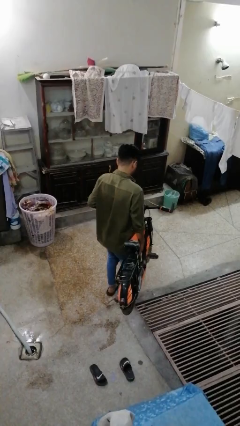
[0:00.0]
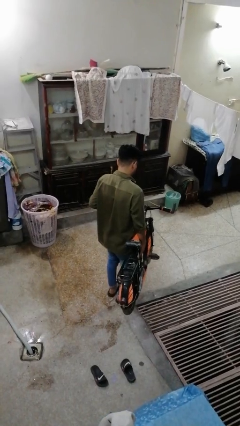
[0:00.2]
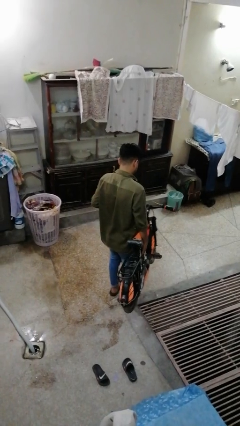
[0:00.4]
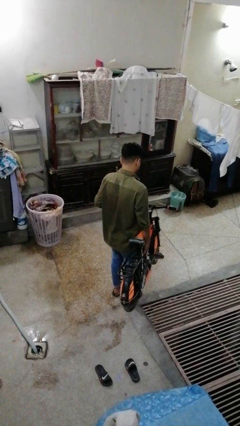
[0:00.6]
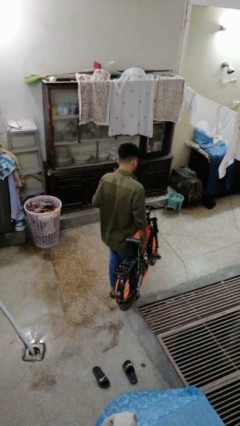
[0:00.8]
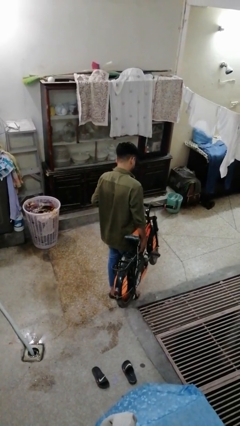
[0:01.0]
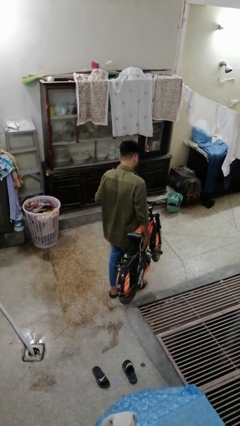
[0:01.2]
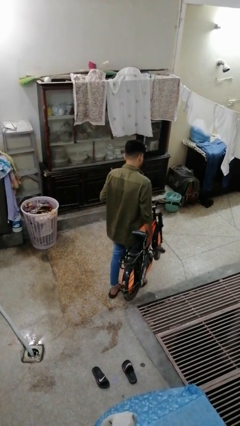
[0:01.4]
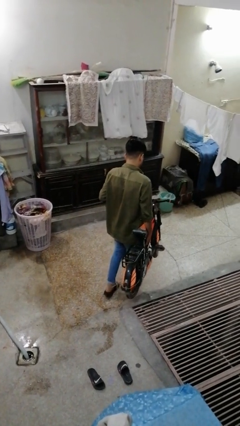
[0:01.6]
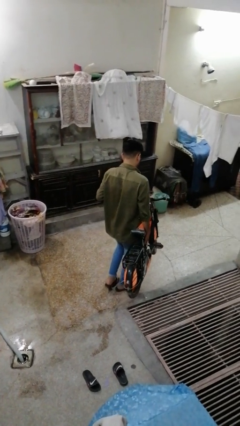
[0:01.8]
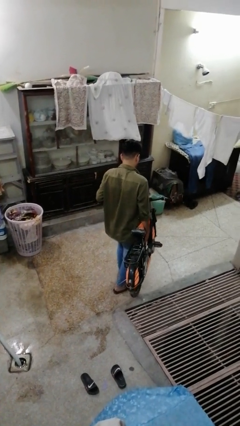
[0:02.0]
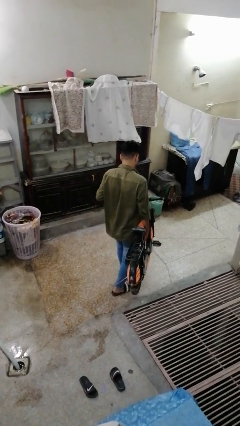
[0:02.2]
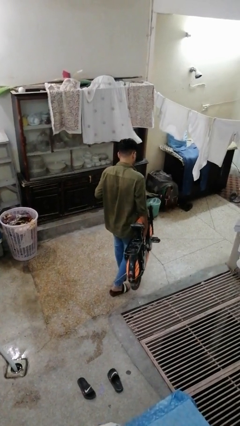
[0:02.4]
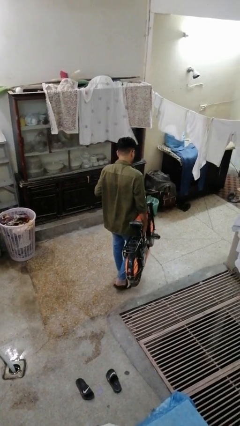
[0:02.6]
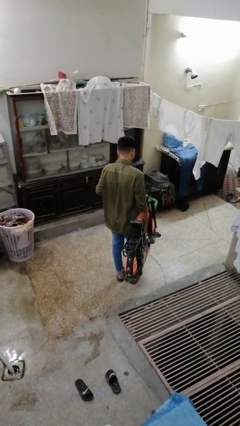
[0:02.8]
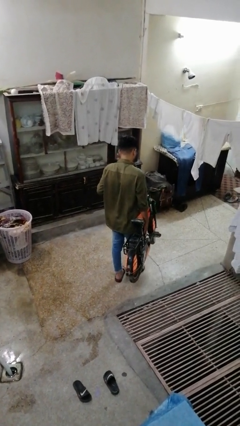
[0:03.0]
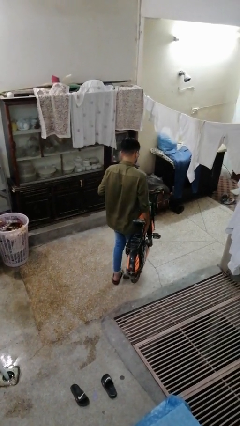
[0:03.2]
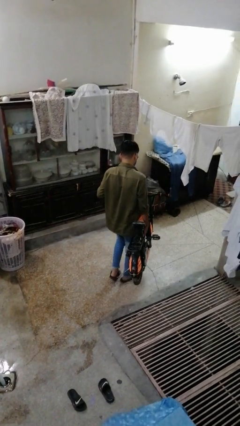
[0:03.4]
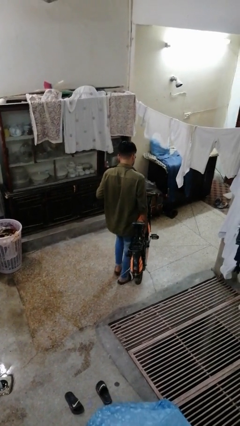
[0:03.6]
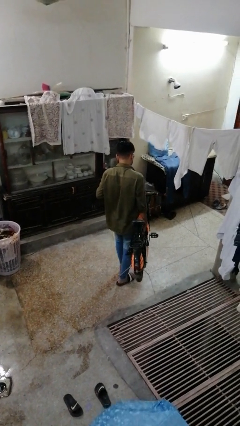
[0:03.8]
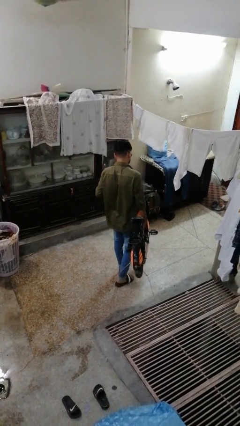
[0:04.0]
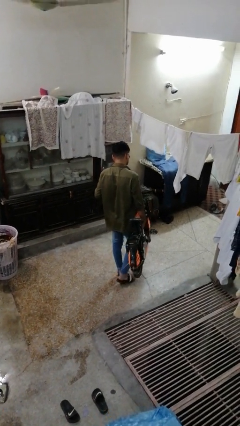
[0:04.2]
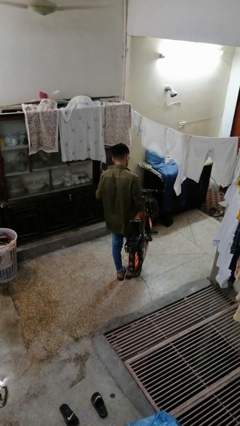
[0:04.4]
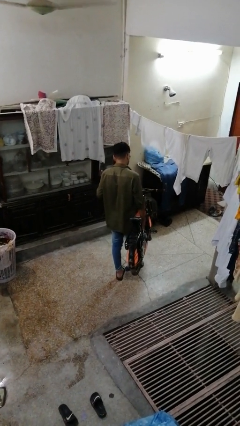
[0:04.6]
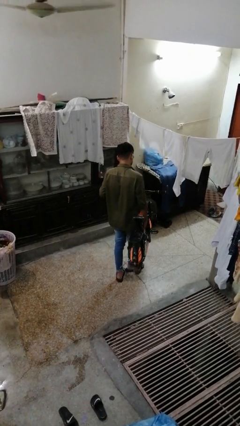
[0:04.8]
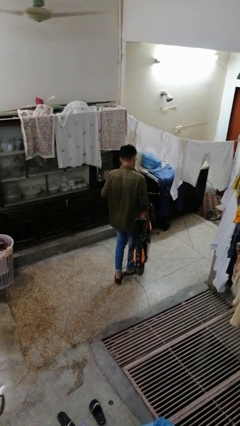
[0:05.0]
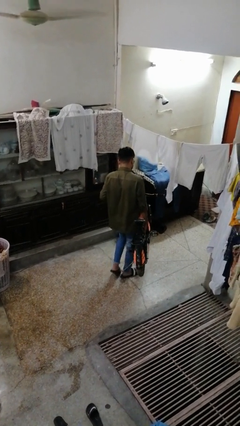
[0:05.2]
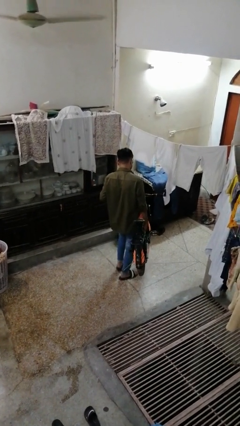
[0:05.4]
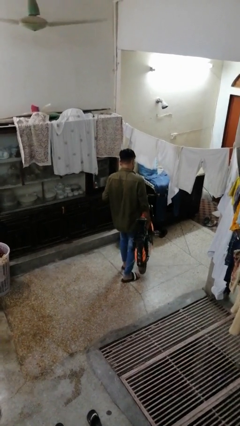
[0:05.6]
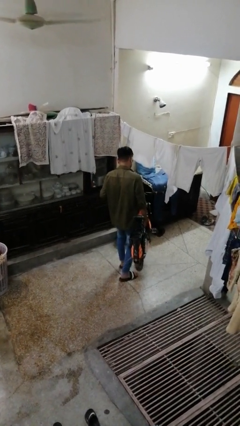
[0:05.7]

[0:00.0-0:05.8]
person carries bicycle

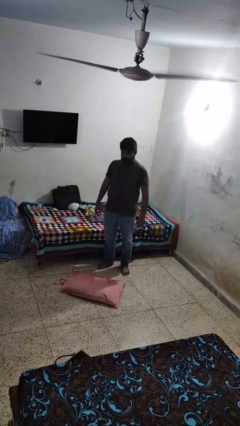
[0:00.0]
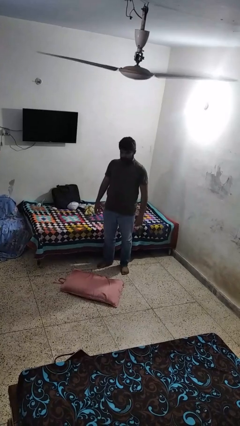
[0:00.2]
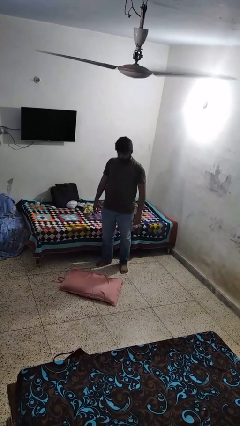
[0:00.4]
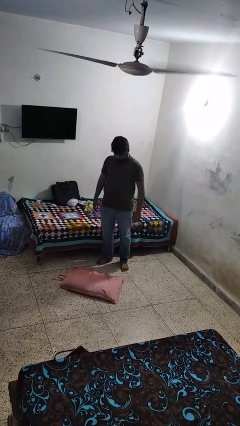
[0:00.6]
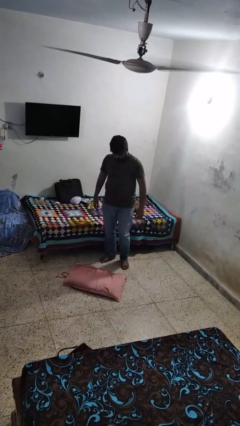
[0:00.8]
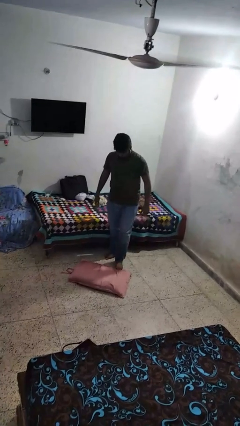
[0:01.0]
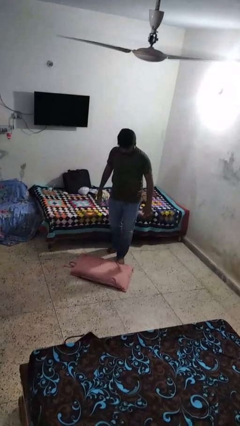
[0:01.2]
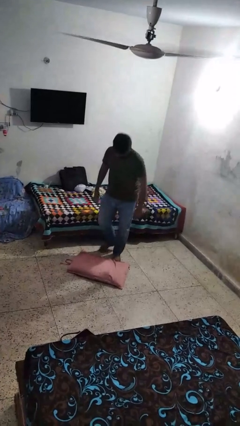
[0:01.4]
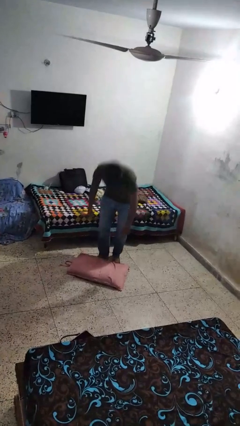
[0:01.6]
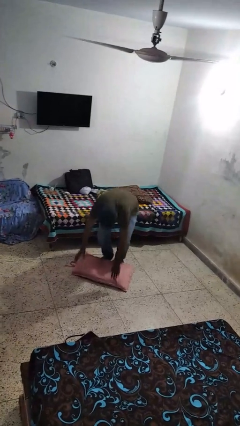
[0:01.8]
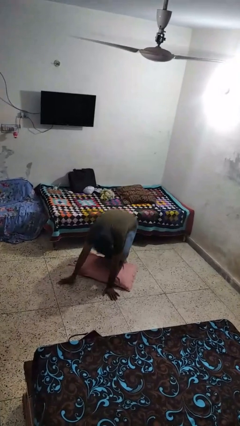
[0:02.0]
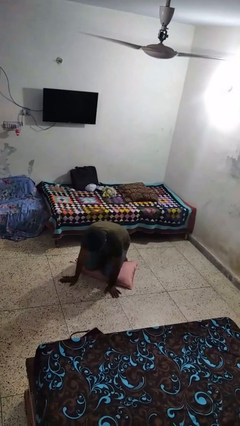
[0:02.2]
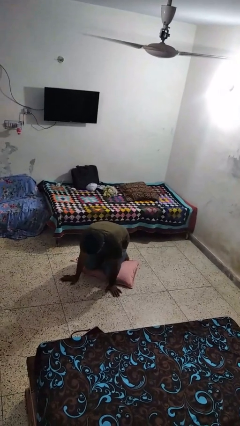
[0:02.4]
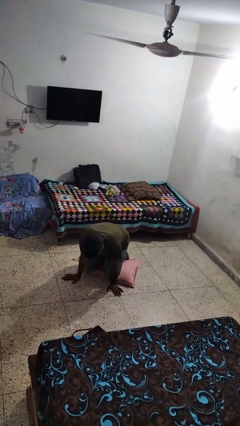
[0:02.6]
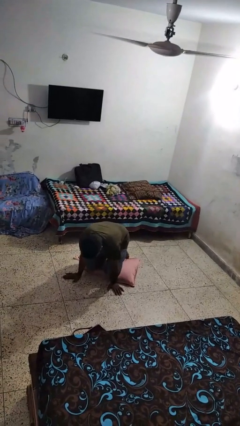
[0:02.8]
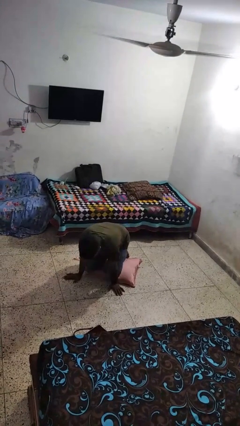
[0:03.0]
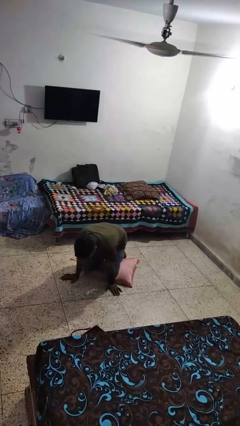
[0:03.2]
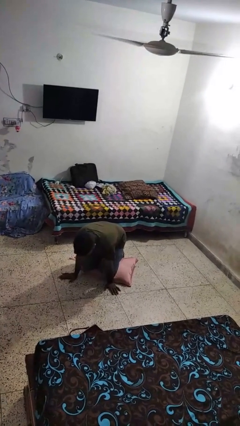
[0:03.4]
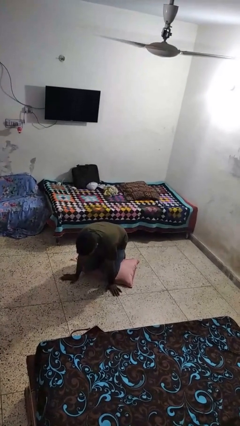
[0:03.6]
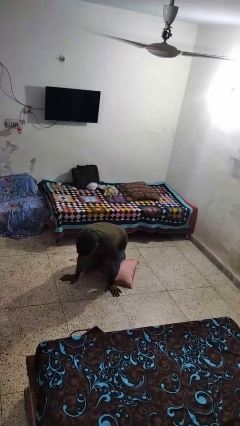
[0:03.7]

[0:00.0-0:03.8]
person trips on object on floor

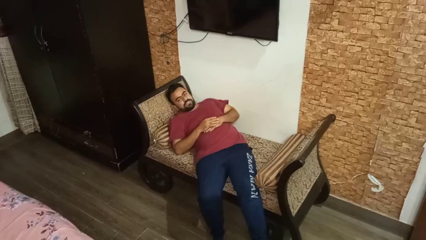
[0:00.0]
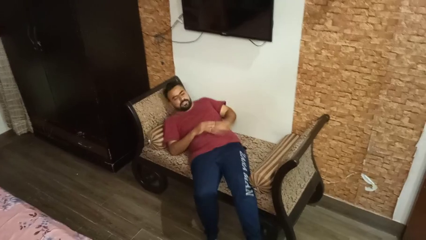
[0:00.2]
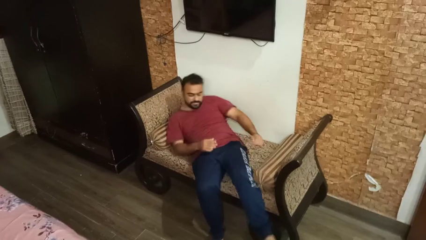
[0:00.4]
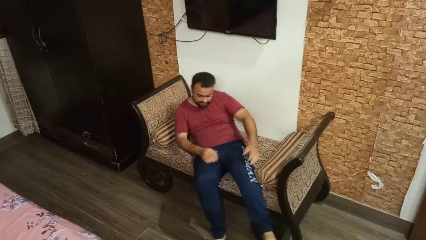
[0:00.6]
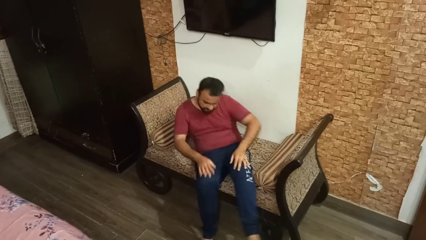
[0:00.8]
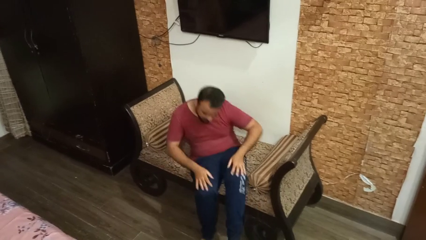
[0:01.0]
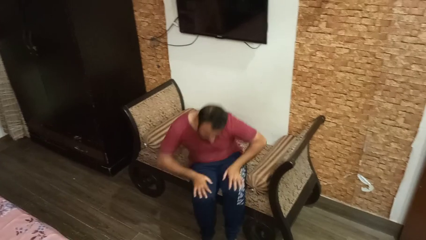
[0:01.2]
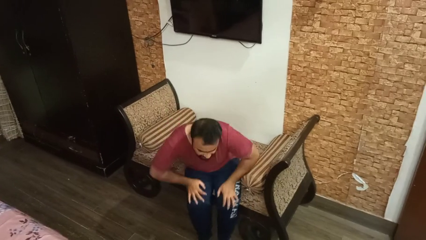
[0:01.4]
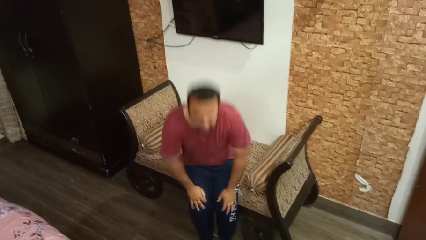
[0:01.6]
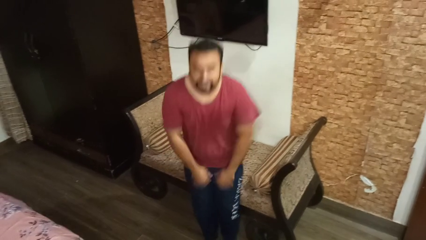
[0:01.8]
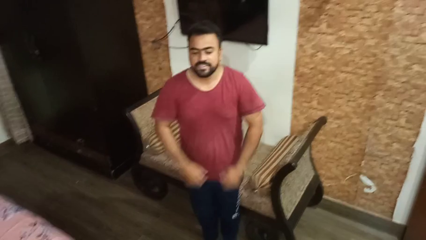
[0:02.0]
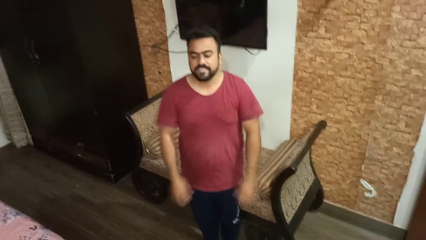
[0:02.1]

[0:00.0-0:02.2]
person stands up

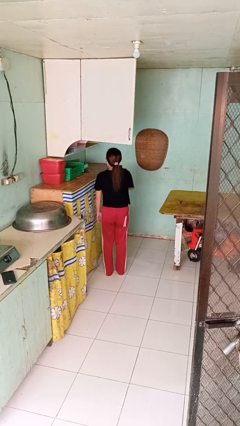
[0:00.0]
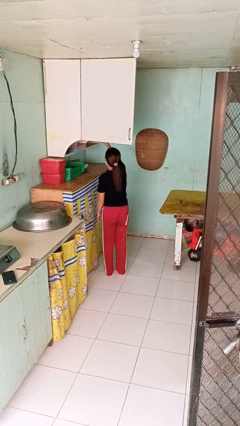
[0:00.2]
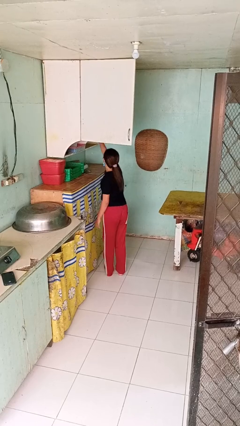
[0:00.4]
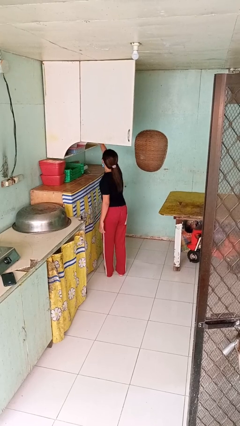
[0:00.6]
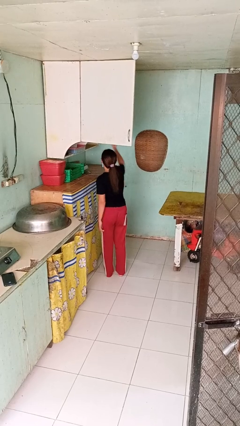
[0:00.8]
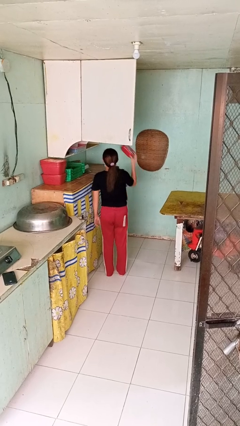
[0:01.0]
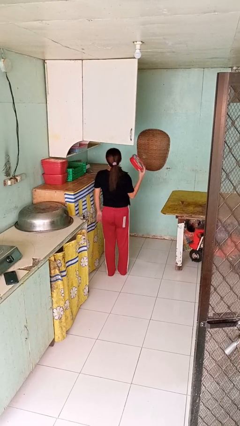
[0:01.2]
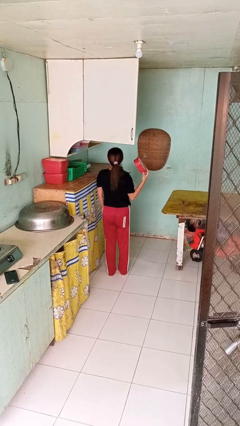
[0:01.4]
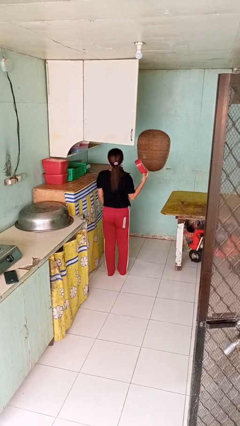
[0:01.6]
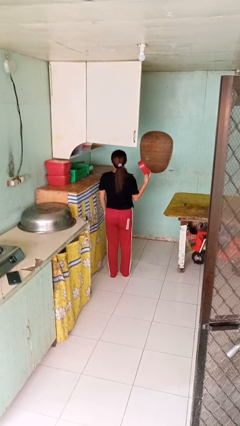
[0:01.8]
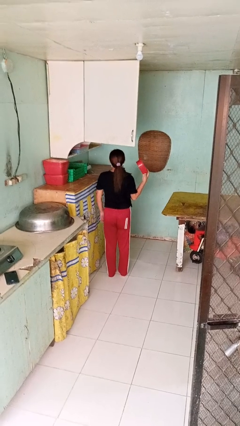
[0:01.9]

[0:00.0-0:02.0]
person takes object from cabinet

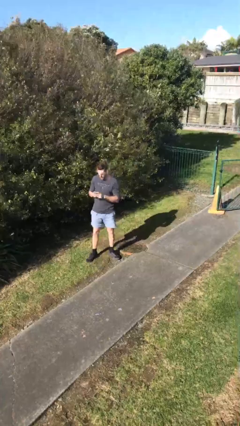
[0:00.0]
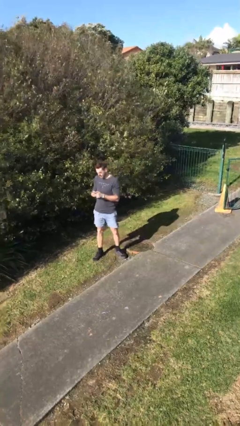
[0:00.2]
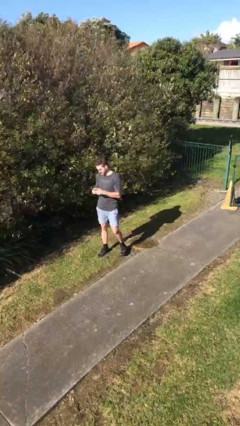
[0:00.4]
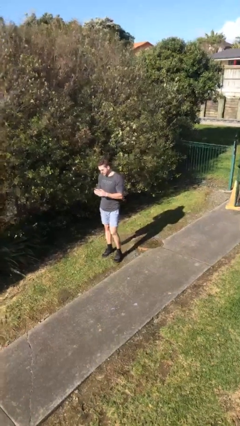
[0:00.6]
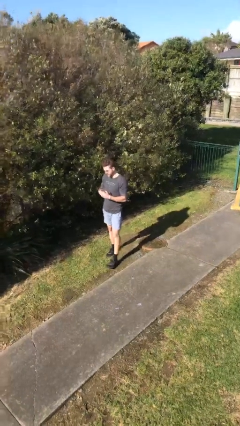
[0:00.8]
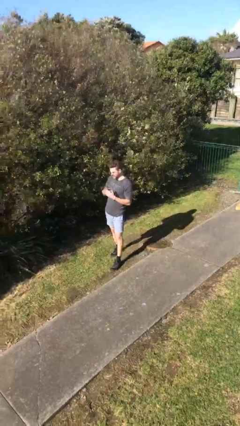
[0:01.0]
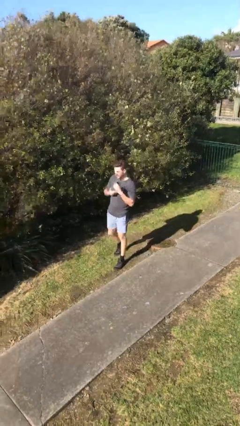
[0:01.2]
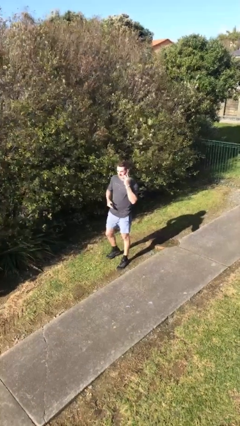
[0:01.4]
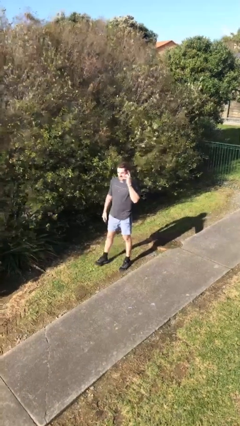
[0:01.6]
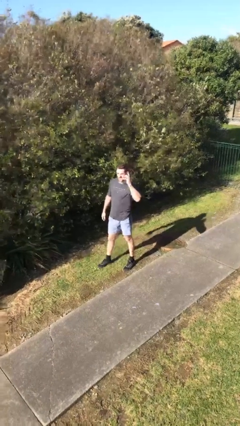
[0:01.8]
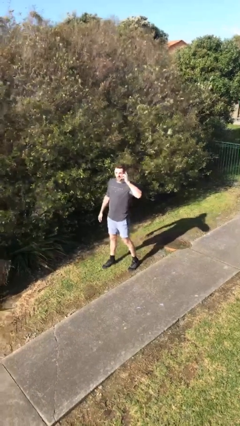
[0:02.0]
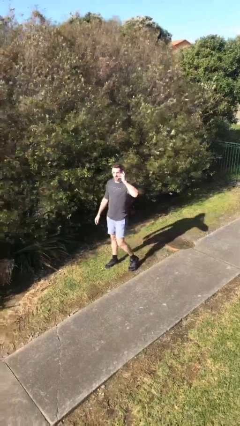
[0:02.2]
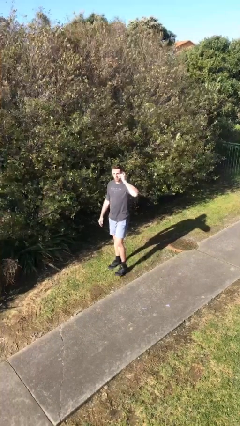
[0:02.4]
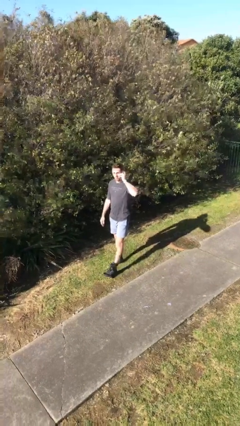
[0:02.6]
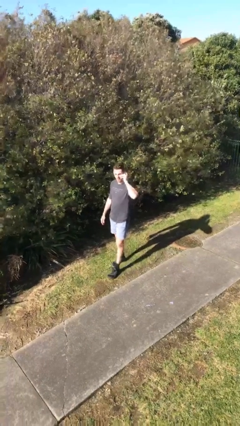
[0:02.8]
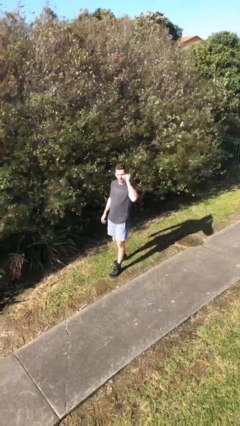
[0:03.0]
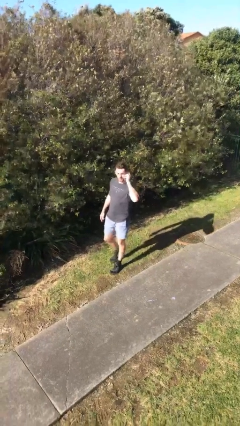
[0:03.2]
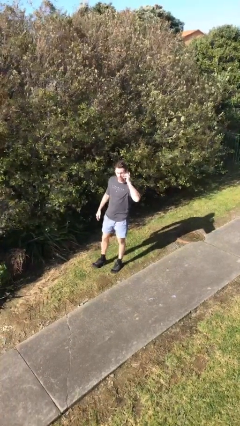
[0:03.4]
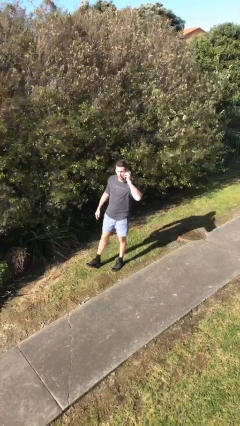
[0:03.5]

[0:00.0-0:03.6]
person talks on phone
